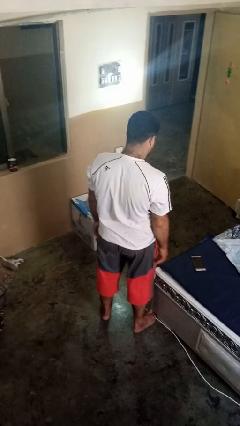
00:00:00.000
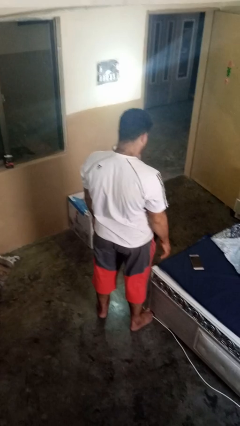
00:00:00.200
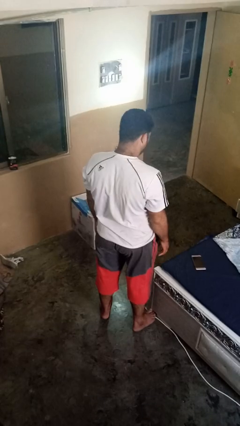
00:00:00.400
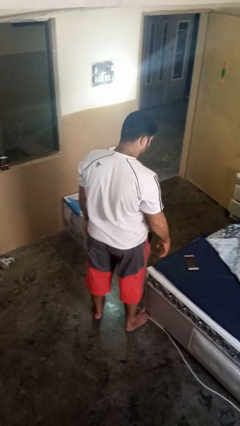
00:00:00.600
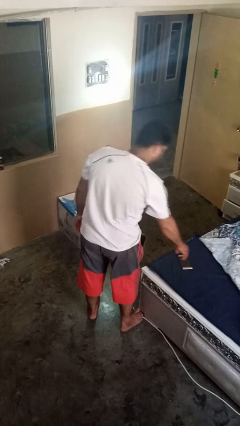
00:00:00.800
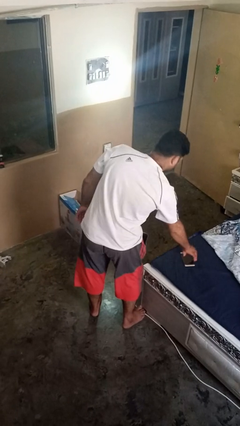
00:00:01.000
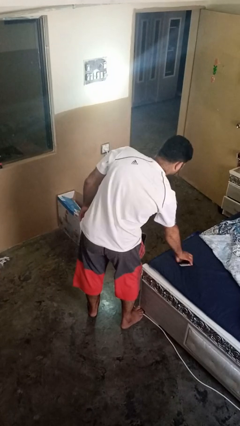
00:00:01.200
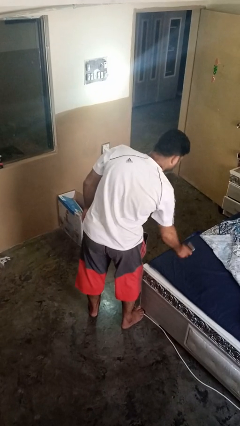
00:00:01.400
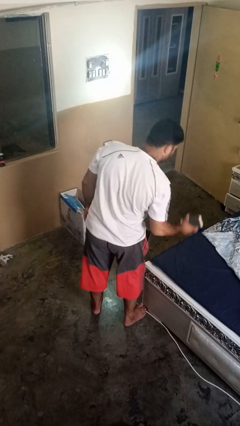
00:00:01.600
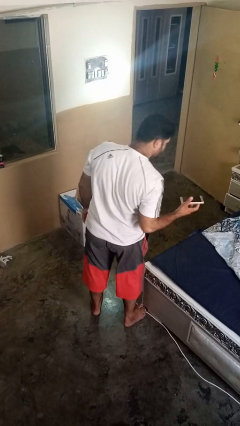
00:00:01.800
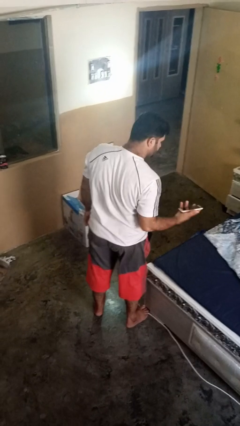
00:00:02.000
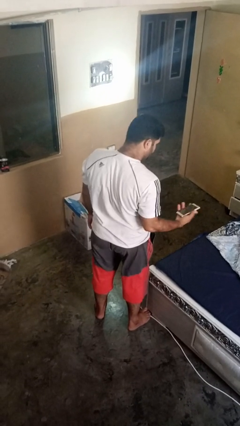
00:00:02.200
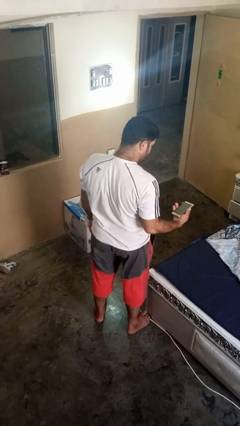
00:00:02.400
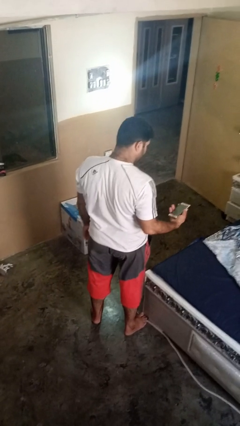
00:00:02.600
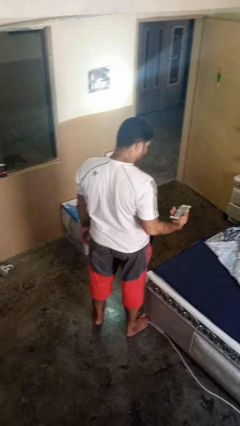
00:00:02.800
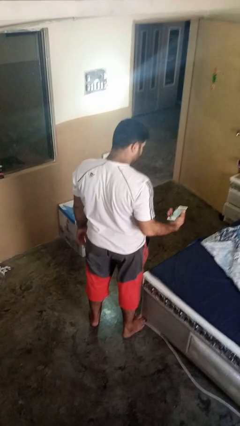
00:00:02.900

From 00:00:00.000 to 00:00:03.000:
person takes phone from pocket

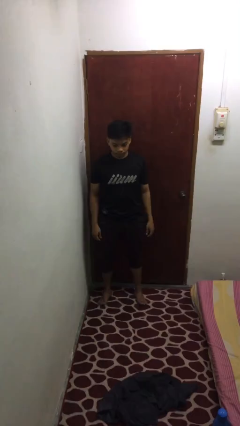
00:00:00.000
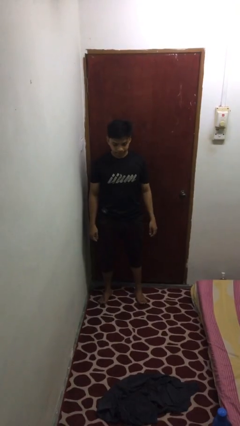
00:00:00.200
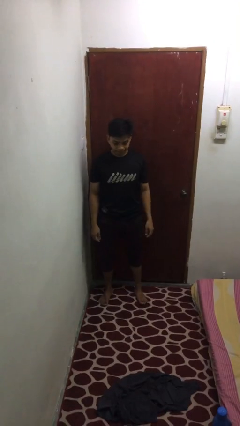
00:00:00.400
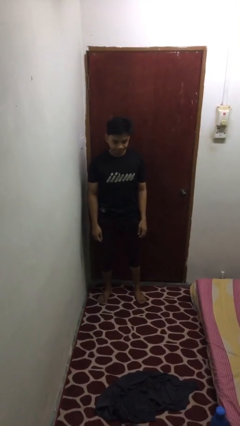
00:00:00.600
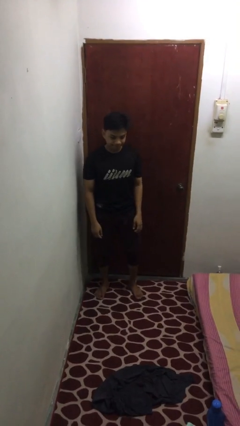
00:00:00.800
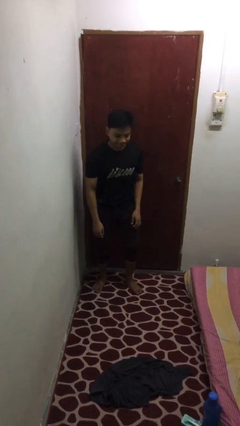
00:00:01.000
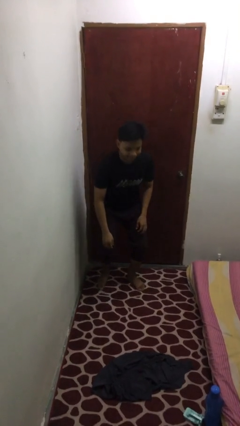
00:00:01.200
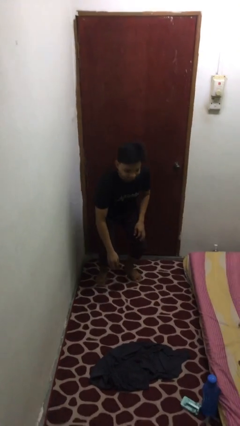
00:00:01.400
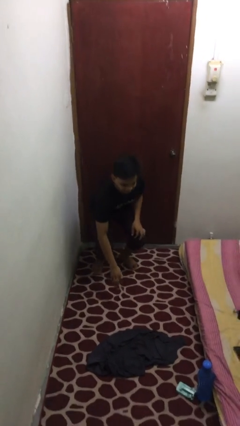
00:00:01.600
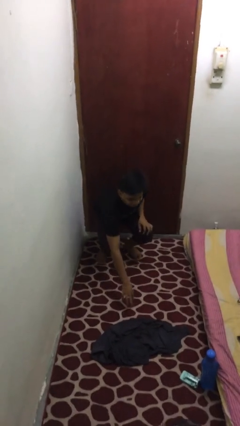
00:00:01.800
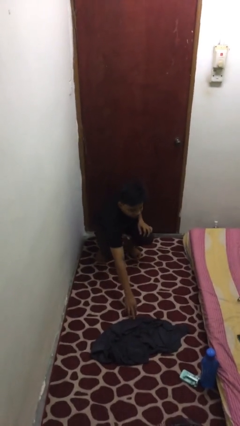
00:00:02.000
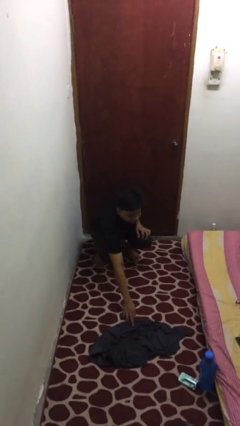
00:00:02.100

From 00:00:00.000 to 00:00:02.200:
person picks up object from floor

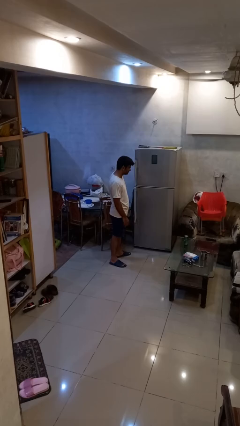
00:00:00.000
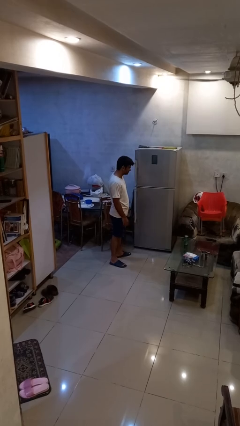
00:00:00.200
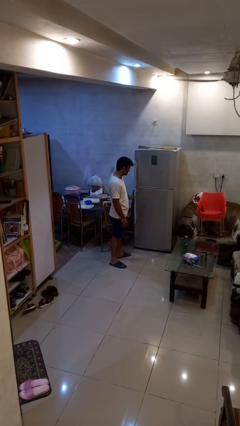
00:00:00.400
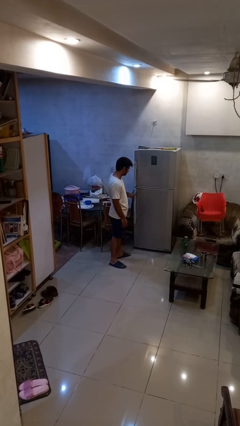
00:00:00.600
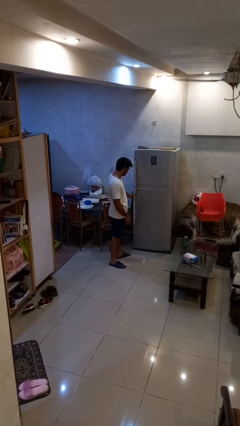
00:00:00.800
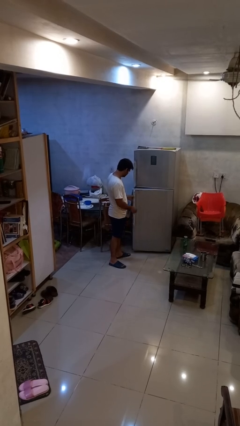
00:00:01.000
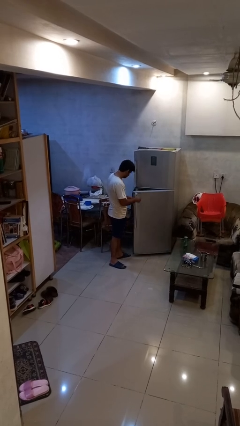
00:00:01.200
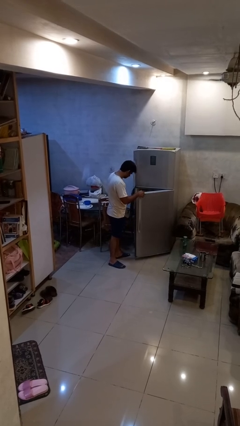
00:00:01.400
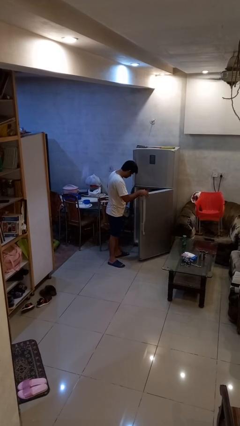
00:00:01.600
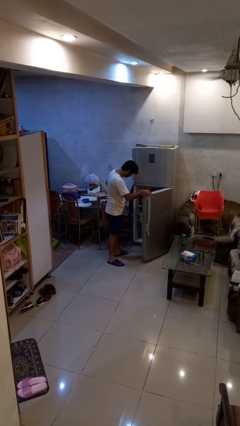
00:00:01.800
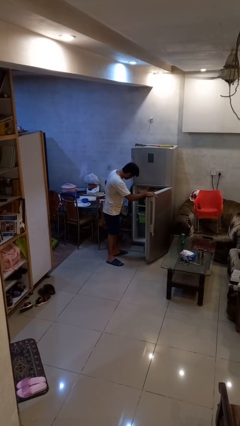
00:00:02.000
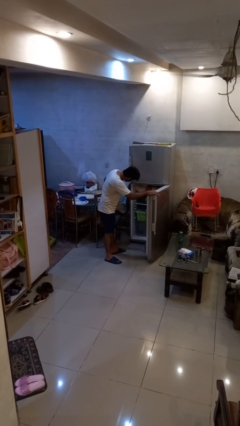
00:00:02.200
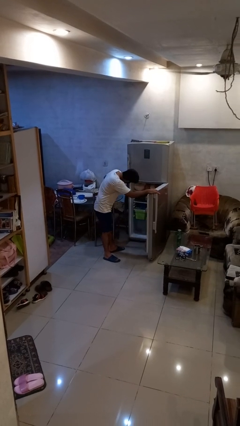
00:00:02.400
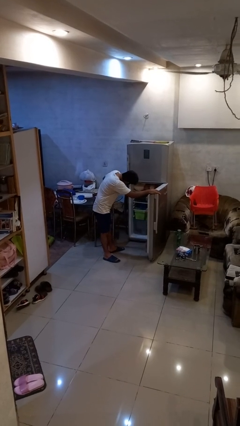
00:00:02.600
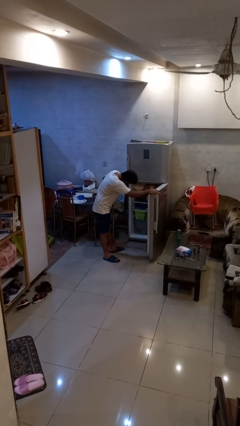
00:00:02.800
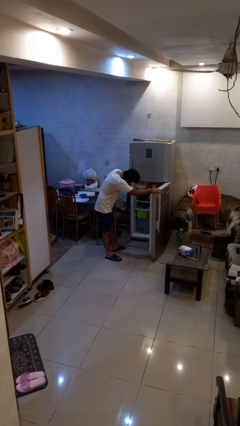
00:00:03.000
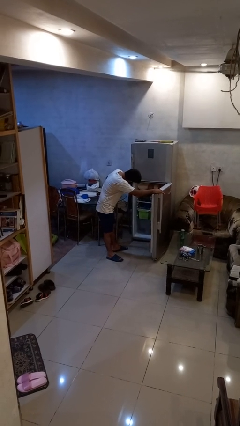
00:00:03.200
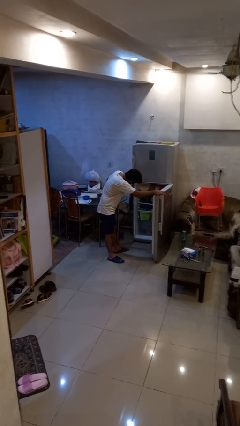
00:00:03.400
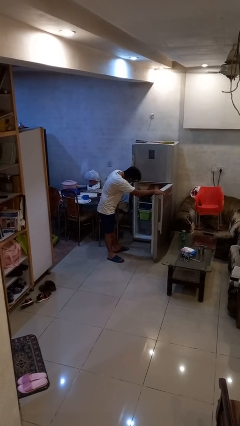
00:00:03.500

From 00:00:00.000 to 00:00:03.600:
person opens refrigerator

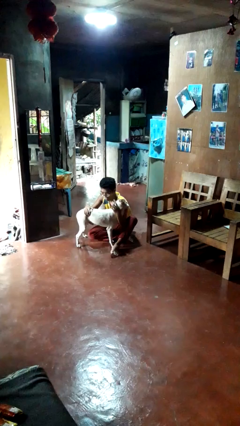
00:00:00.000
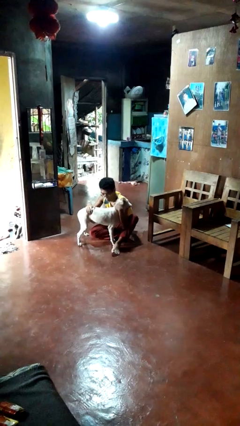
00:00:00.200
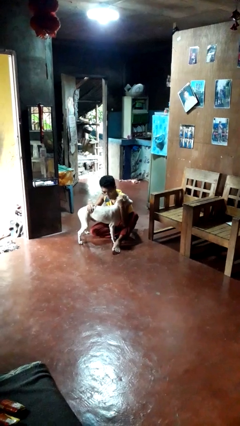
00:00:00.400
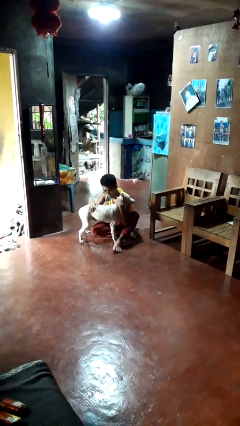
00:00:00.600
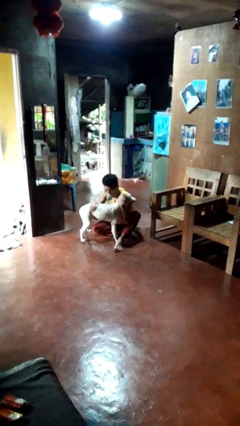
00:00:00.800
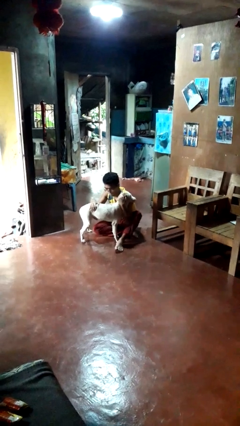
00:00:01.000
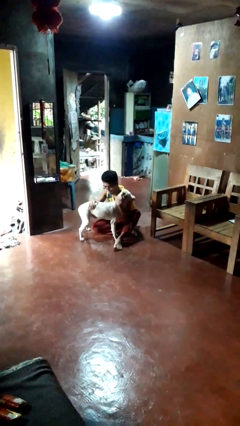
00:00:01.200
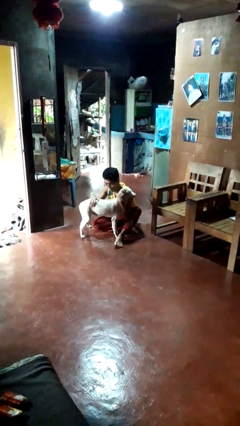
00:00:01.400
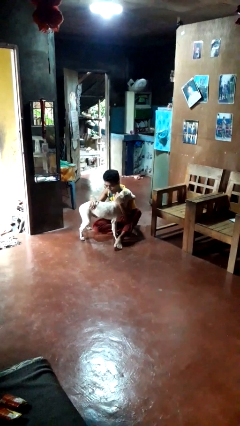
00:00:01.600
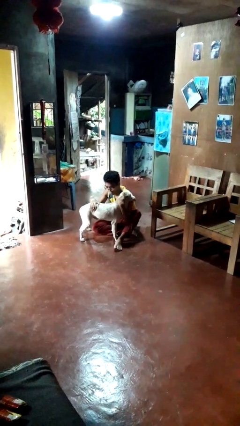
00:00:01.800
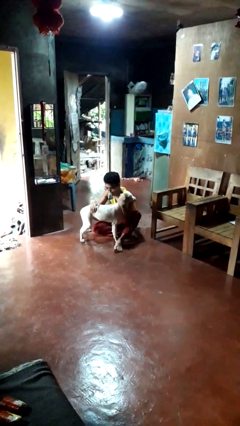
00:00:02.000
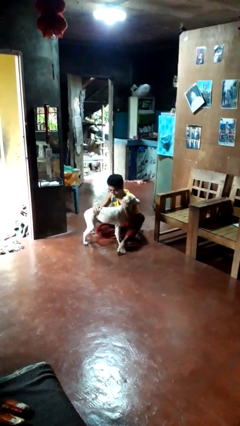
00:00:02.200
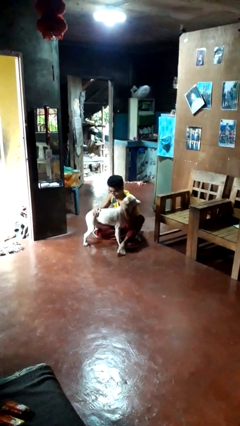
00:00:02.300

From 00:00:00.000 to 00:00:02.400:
person hugs dog

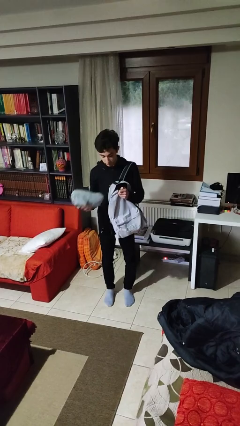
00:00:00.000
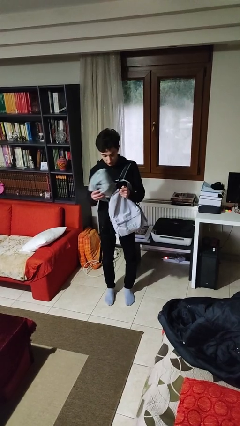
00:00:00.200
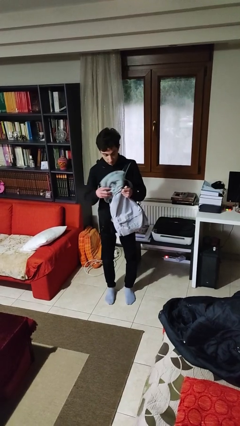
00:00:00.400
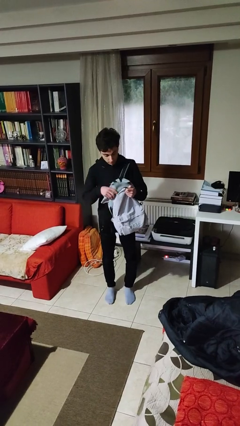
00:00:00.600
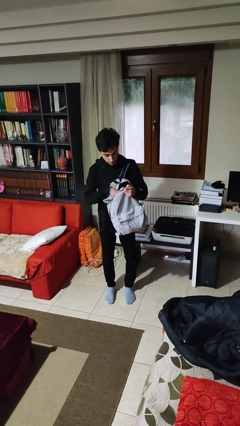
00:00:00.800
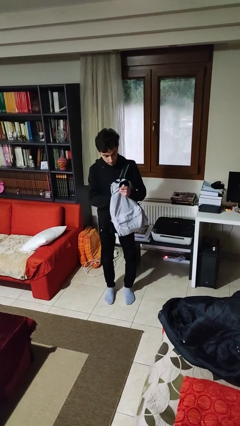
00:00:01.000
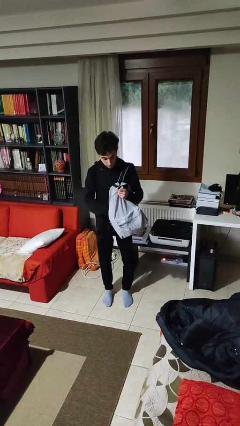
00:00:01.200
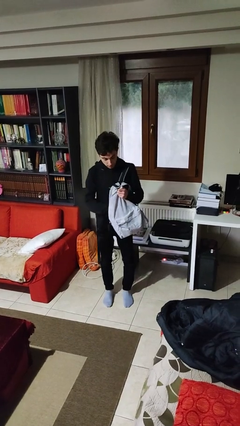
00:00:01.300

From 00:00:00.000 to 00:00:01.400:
person puts object into backpack

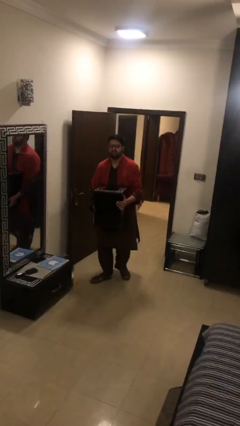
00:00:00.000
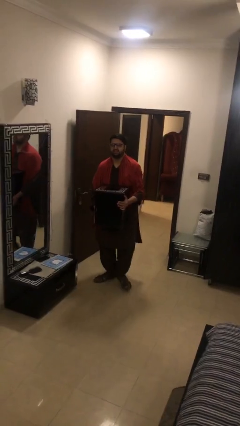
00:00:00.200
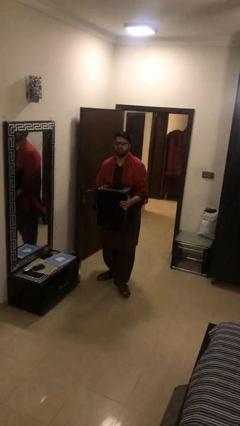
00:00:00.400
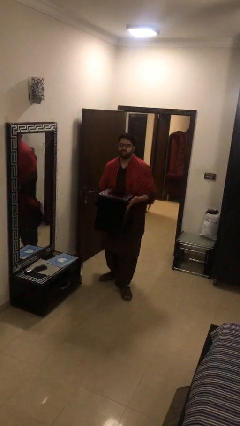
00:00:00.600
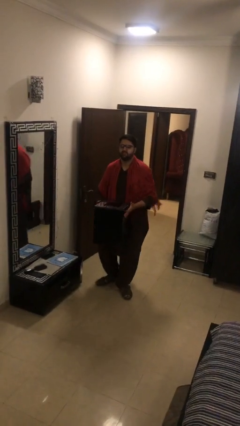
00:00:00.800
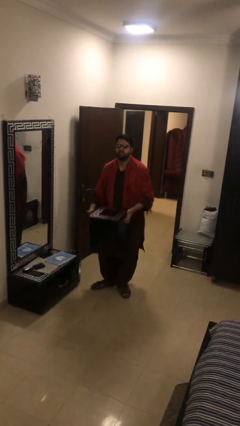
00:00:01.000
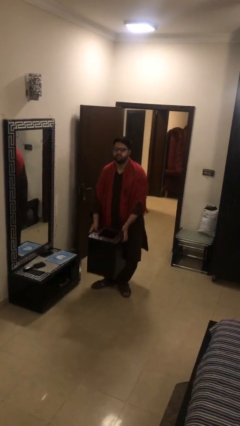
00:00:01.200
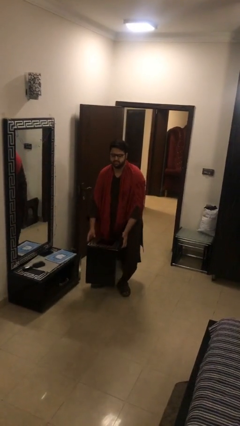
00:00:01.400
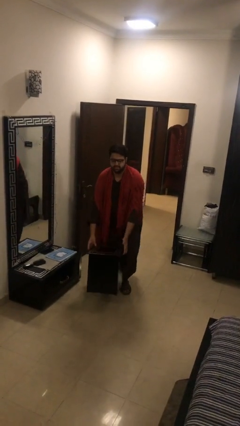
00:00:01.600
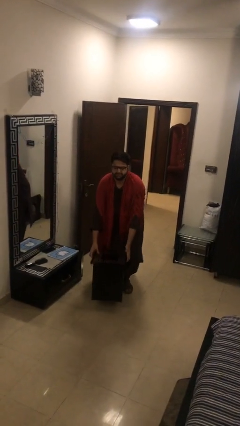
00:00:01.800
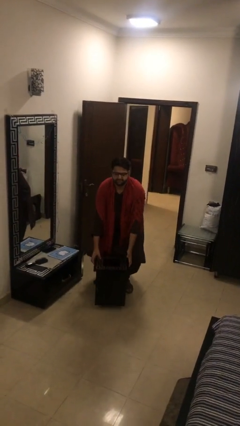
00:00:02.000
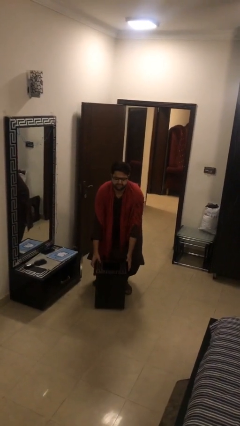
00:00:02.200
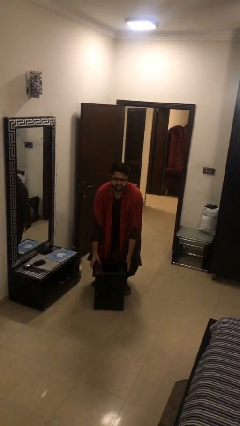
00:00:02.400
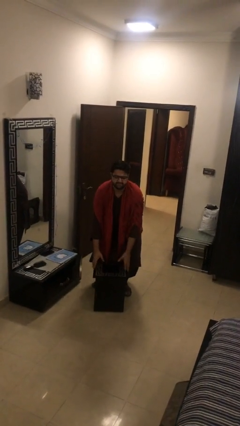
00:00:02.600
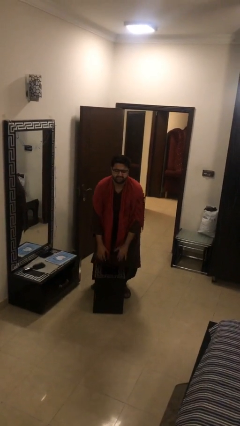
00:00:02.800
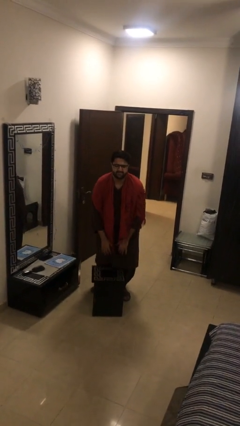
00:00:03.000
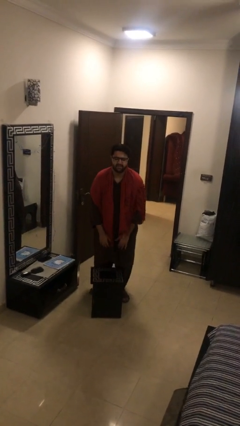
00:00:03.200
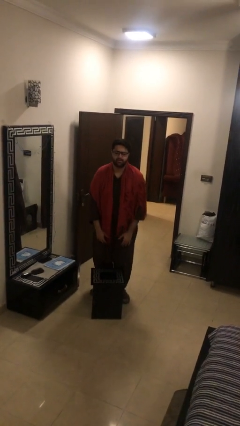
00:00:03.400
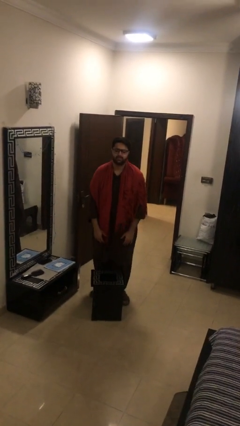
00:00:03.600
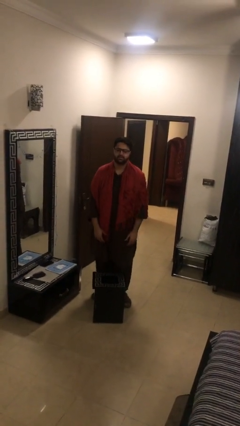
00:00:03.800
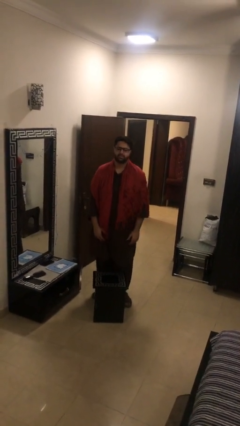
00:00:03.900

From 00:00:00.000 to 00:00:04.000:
person puts down object on floor

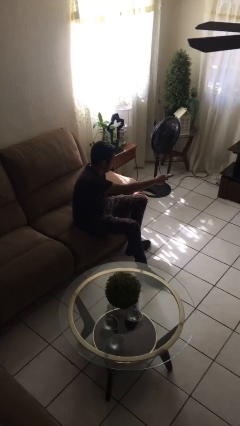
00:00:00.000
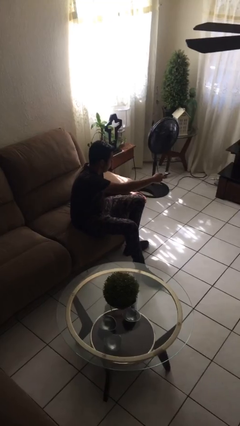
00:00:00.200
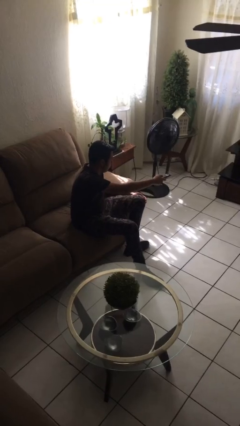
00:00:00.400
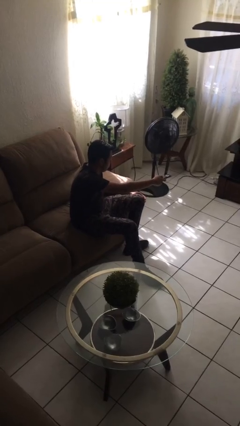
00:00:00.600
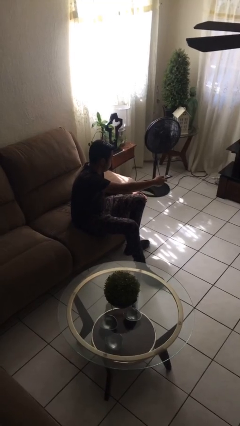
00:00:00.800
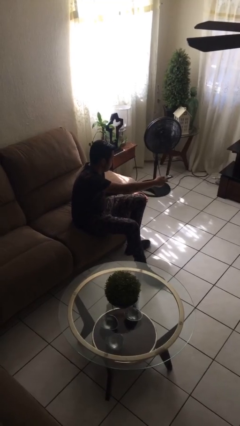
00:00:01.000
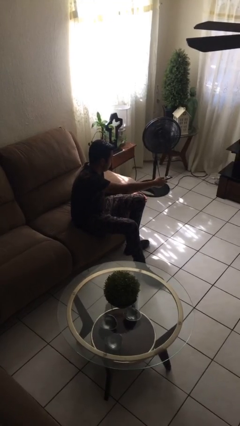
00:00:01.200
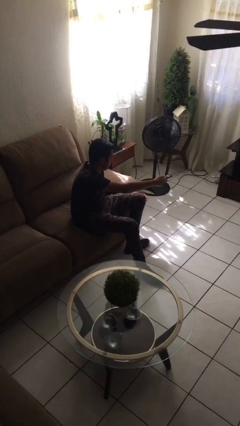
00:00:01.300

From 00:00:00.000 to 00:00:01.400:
person uses television remote
